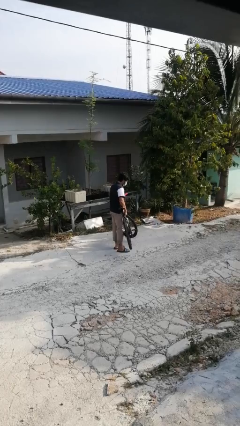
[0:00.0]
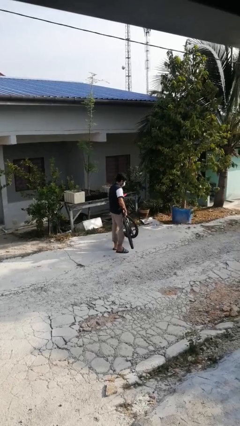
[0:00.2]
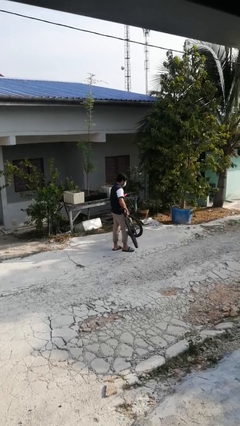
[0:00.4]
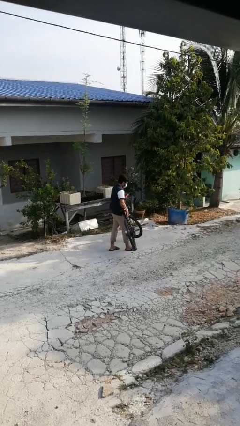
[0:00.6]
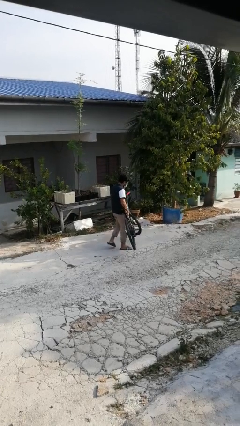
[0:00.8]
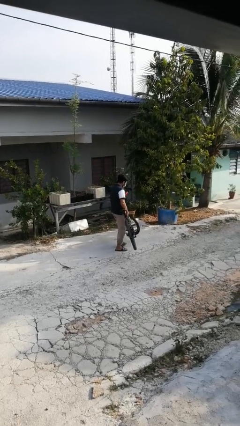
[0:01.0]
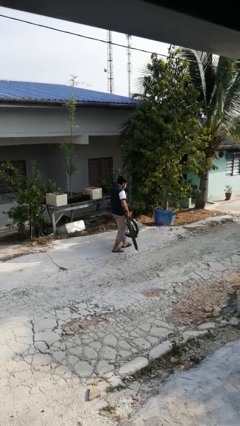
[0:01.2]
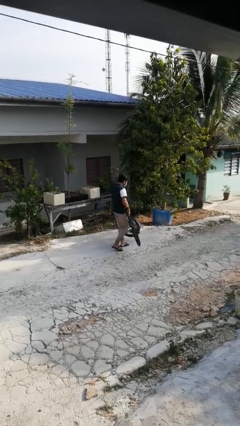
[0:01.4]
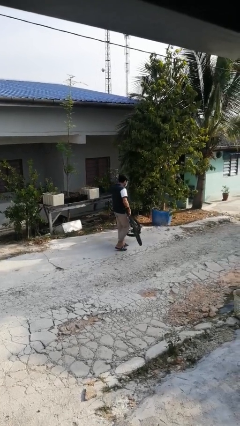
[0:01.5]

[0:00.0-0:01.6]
person carries bicycle

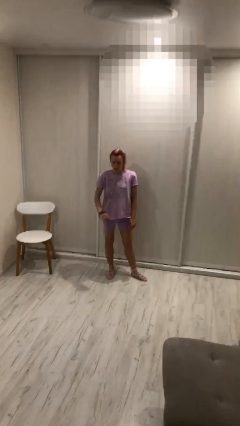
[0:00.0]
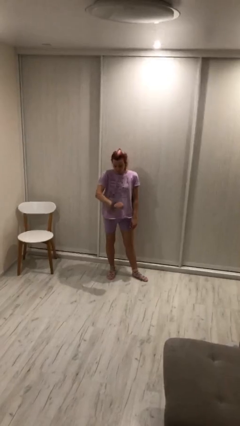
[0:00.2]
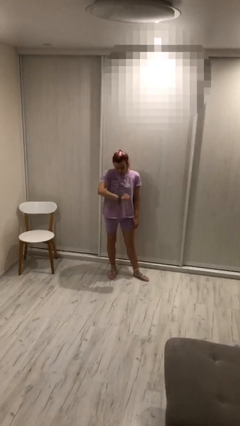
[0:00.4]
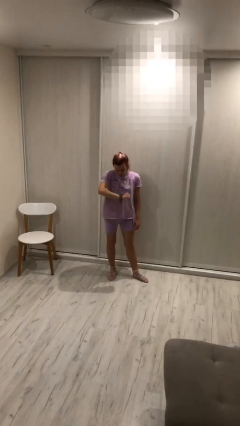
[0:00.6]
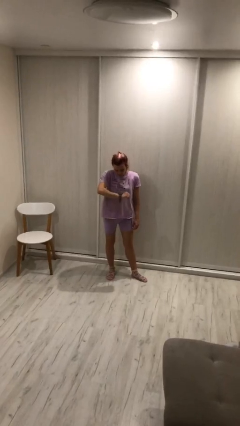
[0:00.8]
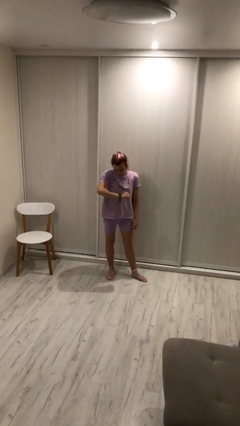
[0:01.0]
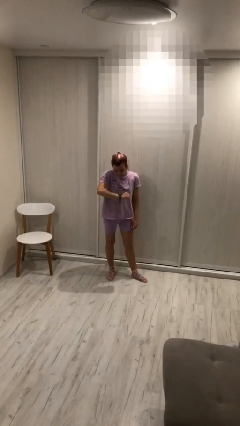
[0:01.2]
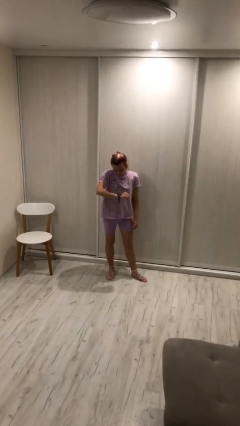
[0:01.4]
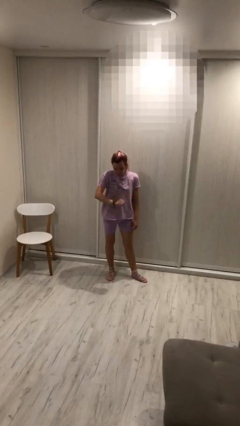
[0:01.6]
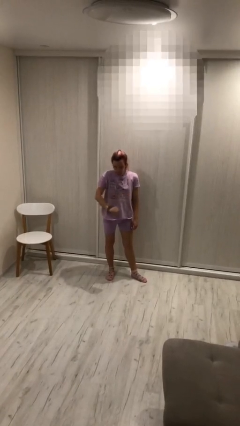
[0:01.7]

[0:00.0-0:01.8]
person looks at wristwatch

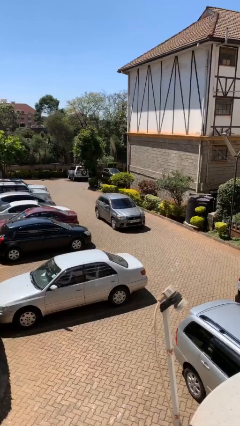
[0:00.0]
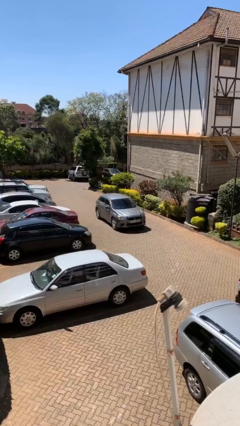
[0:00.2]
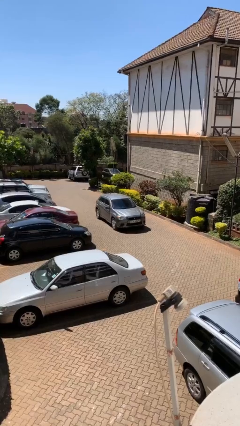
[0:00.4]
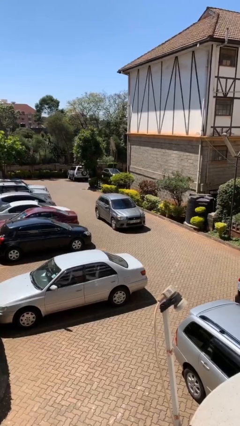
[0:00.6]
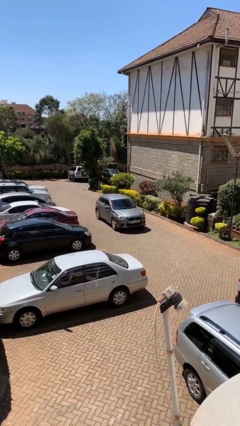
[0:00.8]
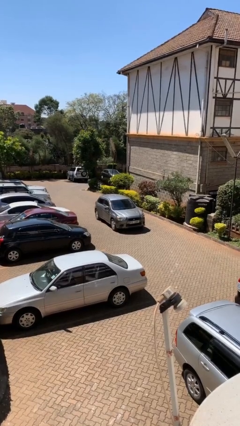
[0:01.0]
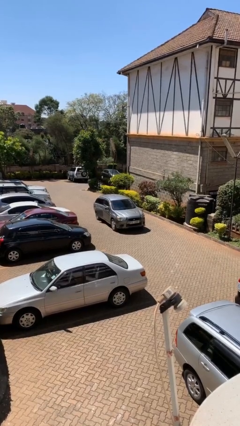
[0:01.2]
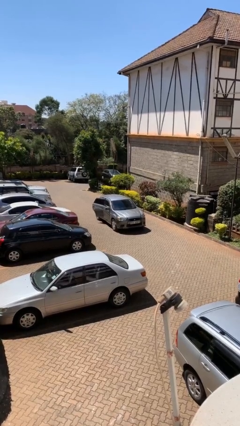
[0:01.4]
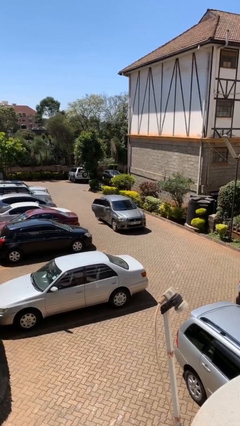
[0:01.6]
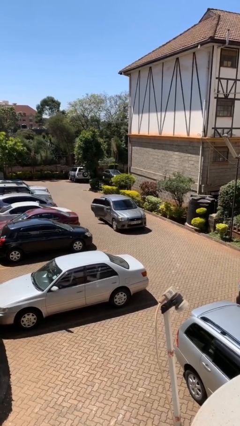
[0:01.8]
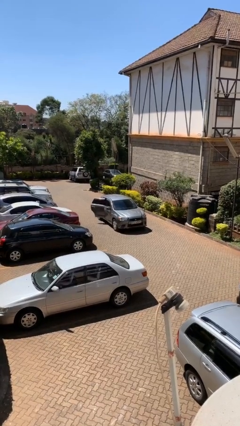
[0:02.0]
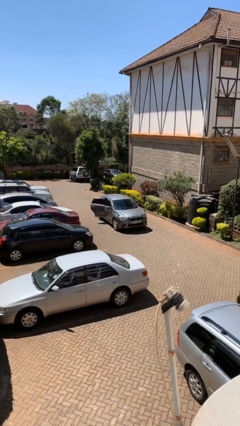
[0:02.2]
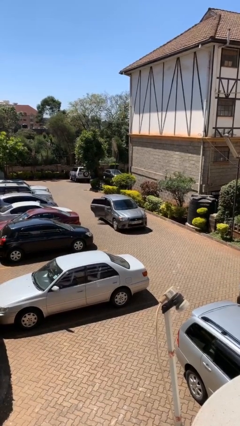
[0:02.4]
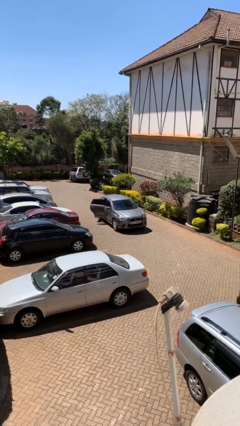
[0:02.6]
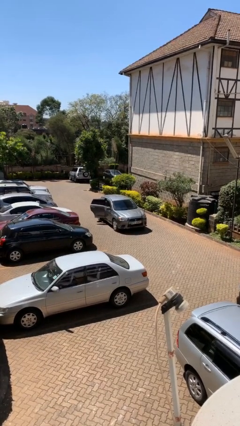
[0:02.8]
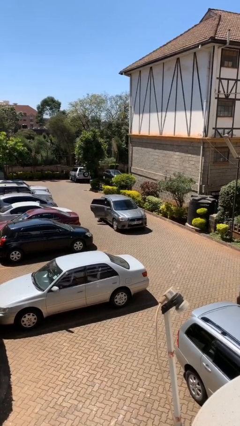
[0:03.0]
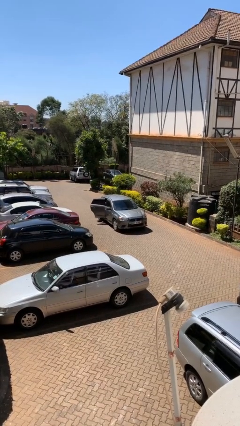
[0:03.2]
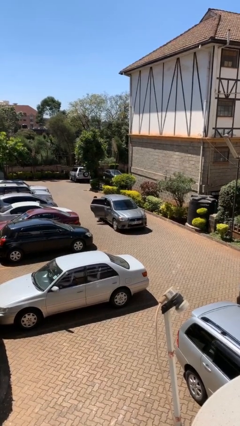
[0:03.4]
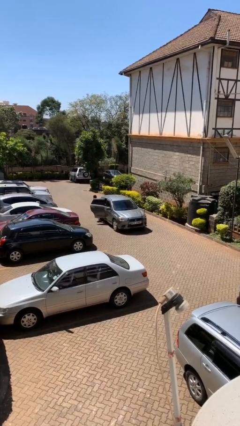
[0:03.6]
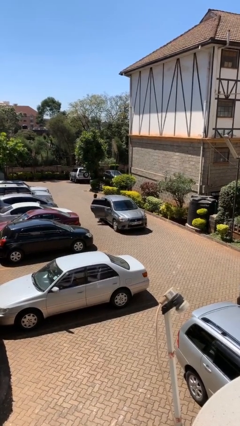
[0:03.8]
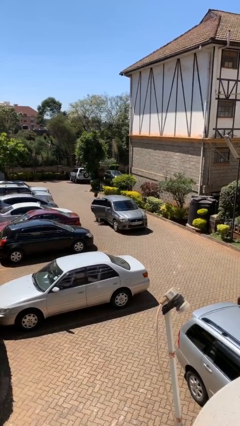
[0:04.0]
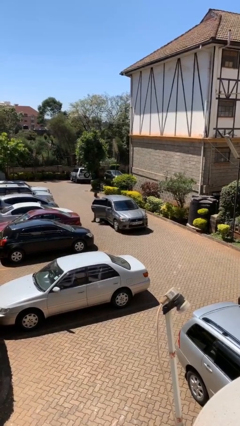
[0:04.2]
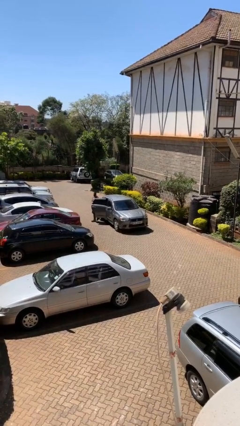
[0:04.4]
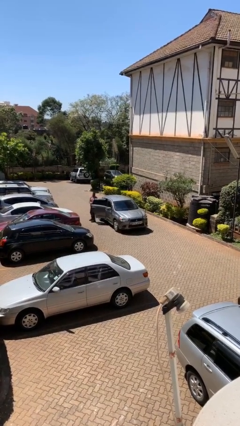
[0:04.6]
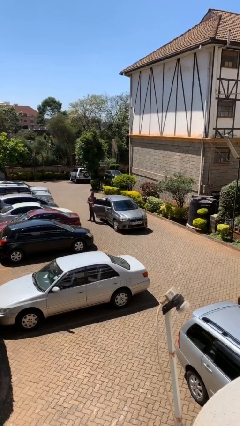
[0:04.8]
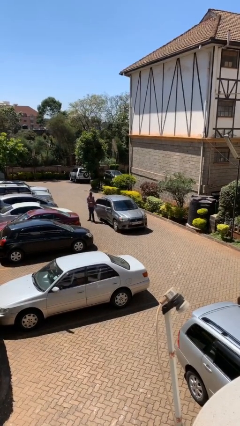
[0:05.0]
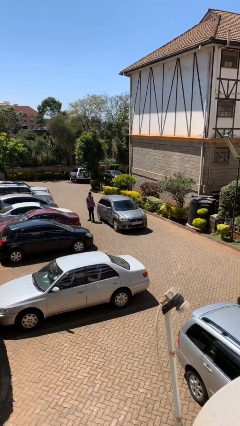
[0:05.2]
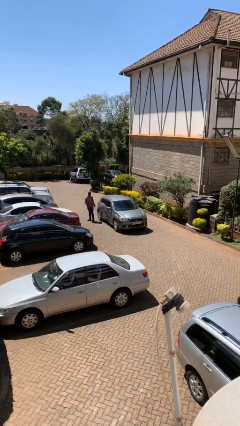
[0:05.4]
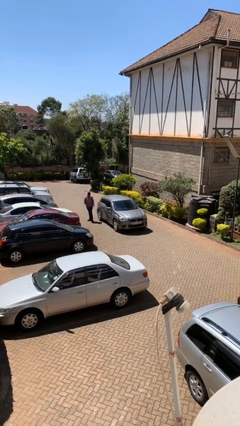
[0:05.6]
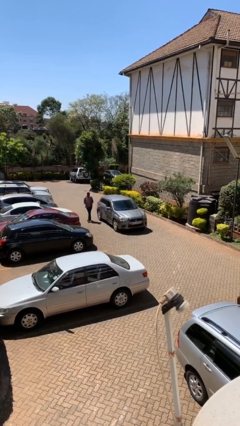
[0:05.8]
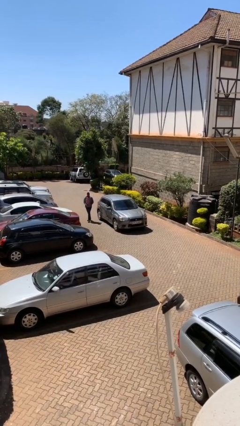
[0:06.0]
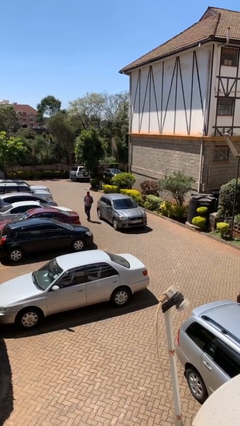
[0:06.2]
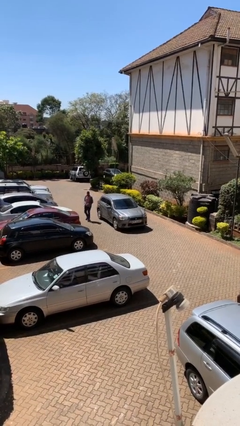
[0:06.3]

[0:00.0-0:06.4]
car drops off person

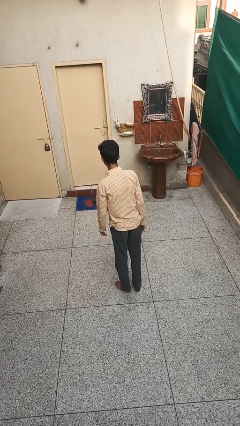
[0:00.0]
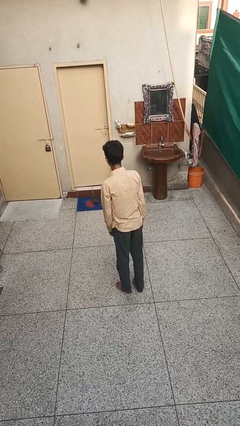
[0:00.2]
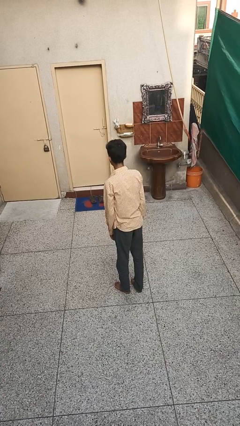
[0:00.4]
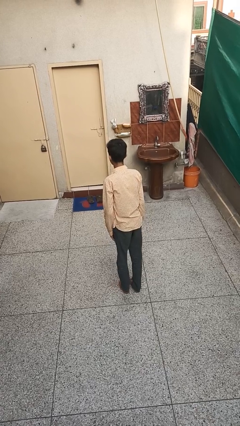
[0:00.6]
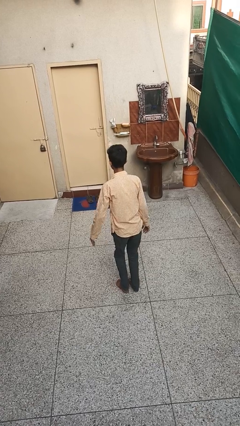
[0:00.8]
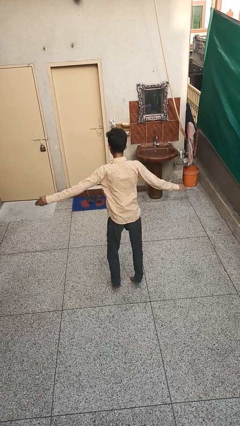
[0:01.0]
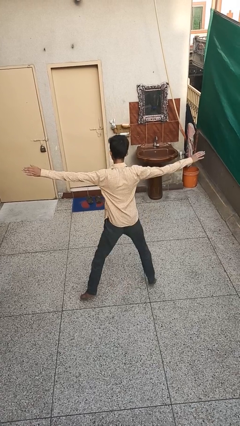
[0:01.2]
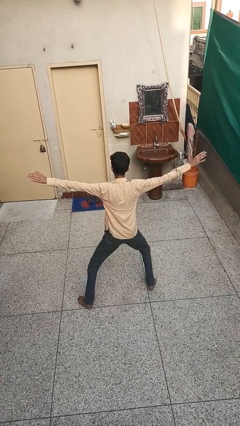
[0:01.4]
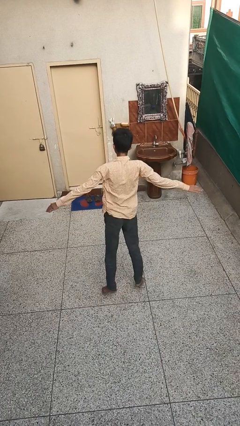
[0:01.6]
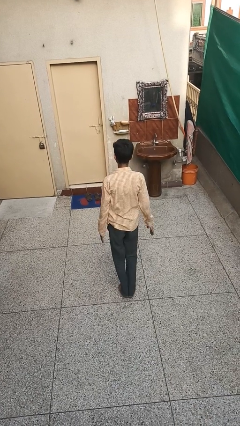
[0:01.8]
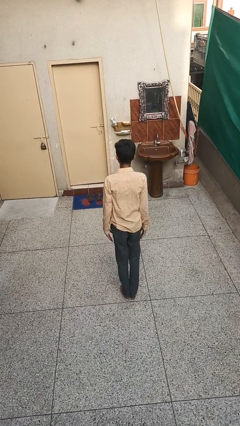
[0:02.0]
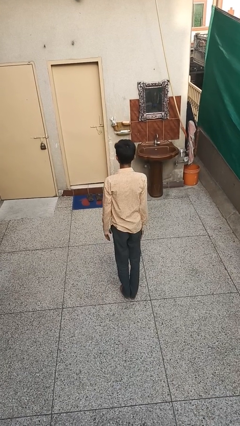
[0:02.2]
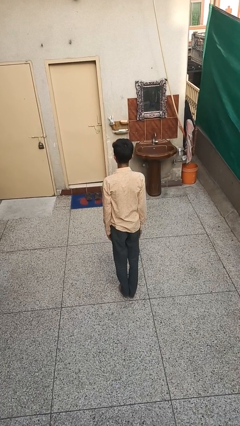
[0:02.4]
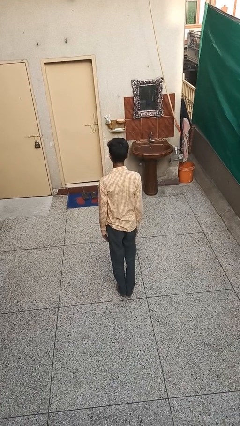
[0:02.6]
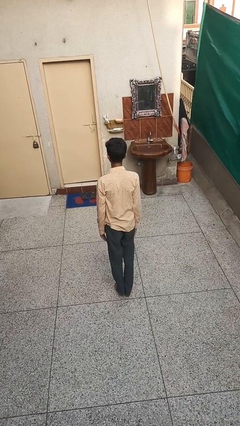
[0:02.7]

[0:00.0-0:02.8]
person exercises with jumping jacks

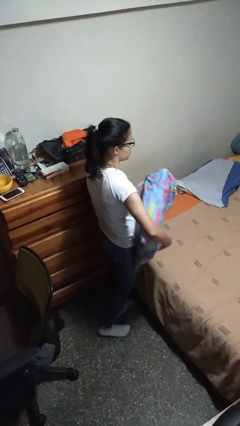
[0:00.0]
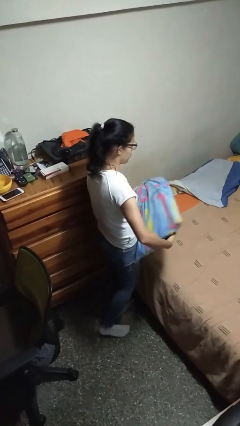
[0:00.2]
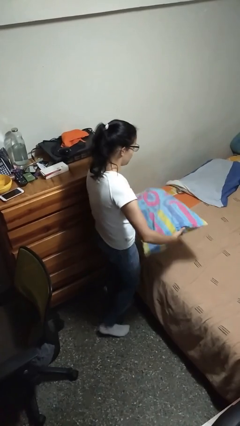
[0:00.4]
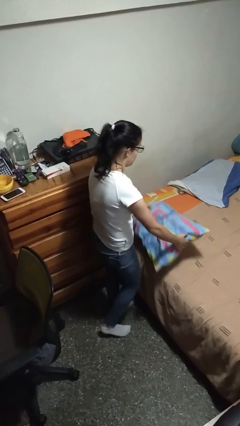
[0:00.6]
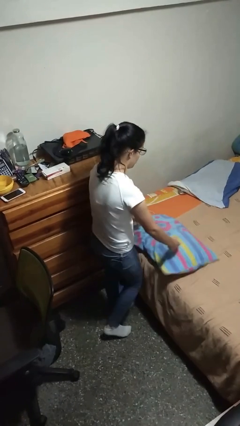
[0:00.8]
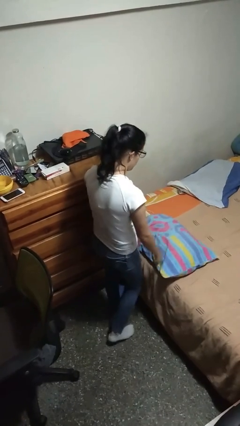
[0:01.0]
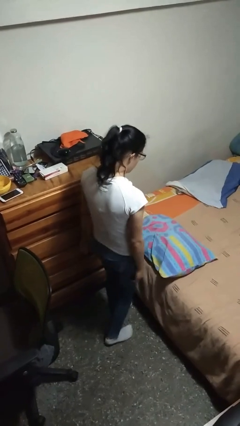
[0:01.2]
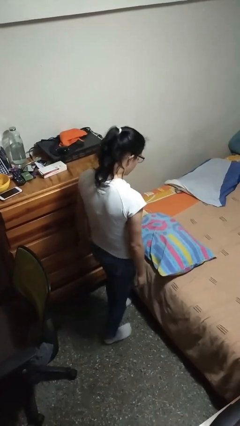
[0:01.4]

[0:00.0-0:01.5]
person puts down object on bed

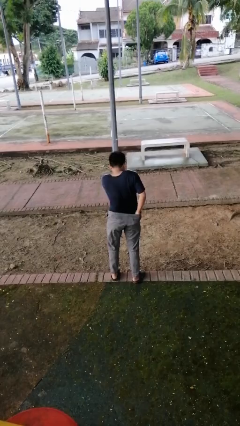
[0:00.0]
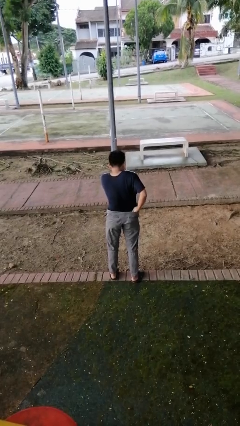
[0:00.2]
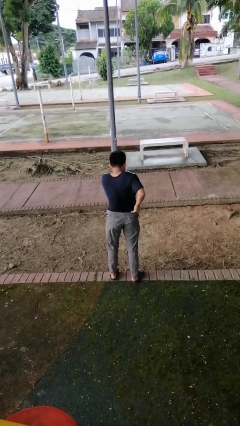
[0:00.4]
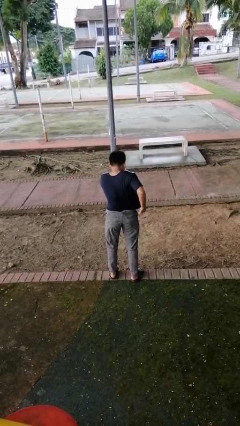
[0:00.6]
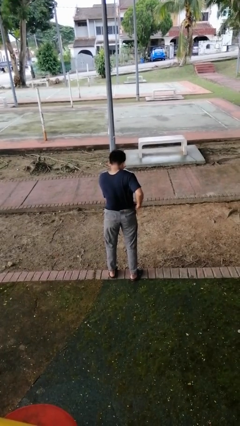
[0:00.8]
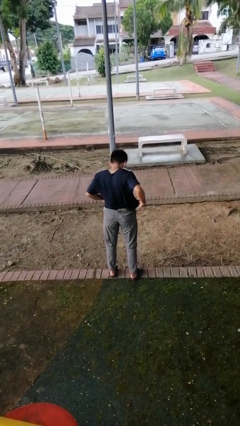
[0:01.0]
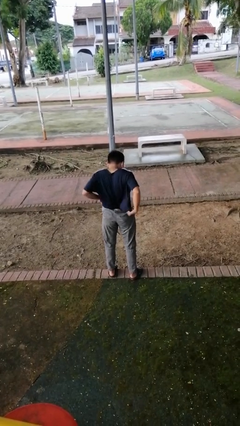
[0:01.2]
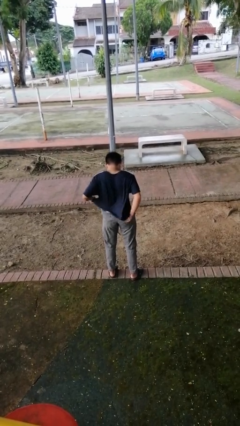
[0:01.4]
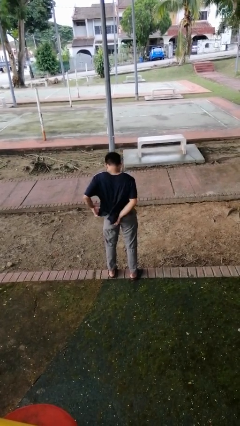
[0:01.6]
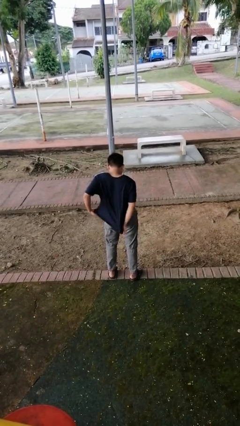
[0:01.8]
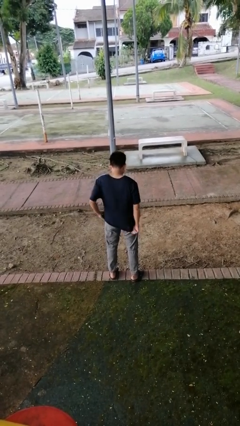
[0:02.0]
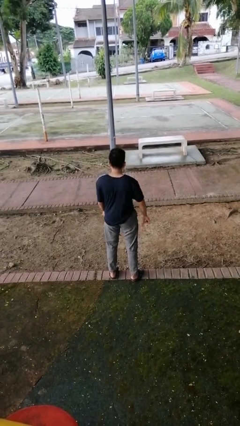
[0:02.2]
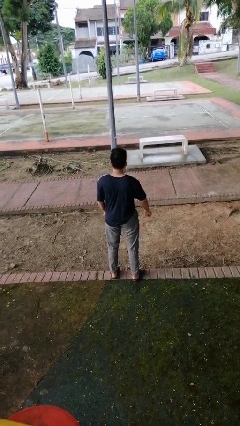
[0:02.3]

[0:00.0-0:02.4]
person untucks shirt

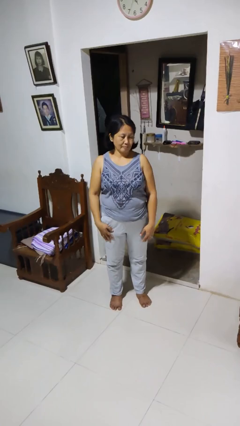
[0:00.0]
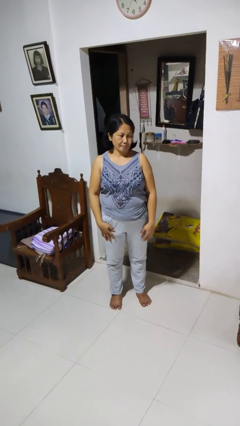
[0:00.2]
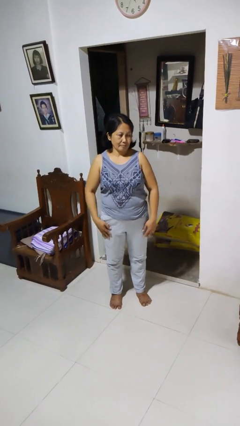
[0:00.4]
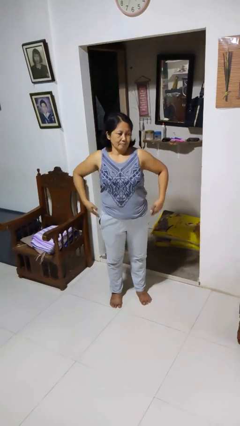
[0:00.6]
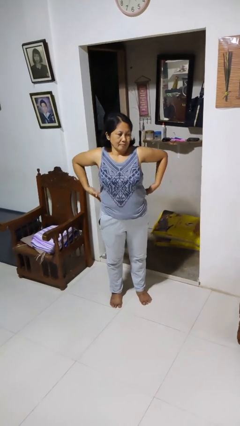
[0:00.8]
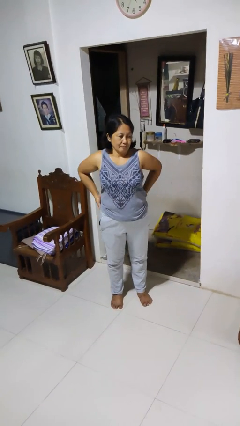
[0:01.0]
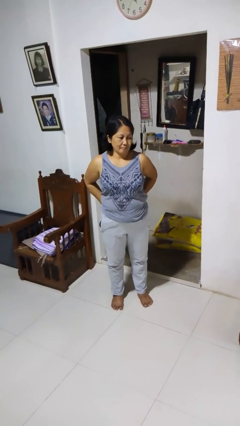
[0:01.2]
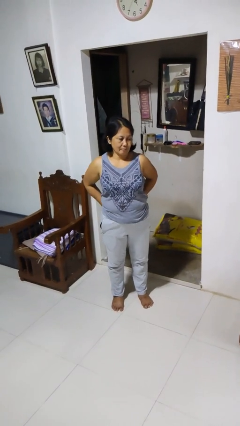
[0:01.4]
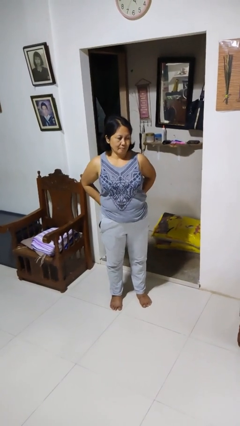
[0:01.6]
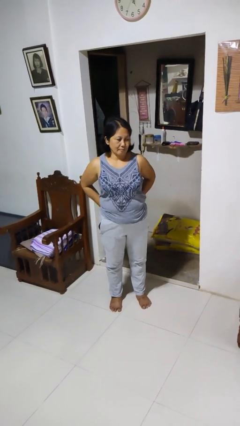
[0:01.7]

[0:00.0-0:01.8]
person puts hands in back pockets
